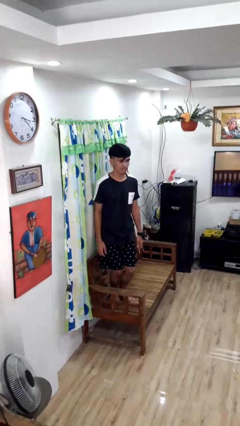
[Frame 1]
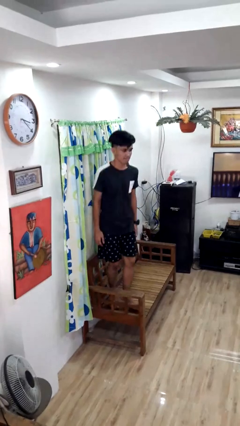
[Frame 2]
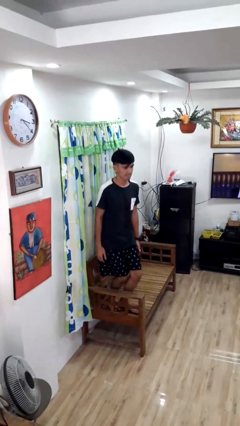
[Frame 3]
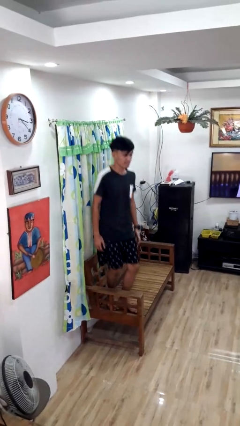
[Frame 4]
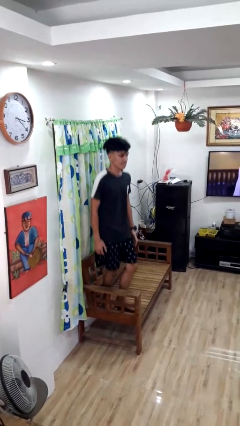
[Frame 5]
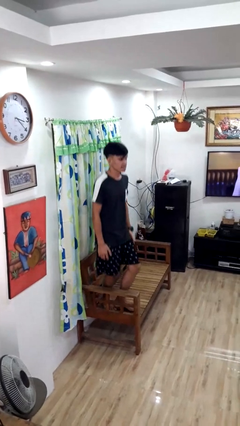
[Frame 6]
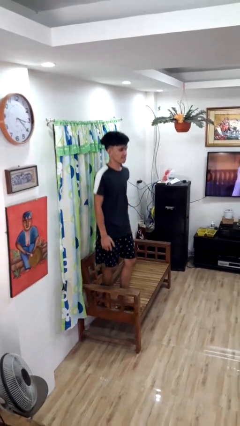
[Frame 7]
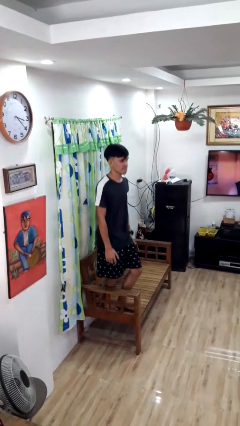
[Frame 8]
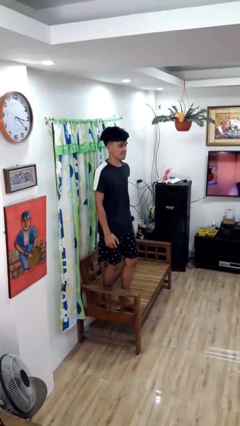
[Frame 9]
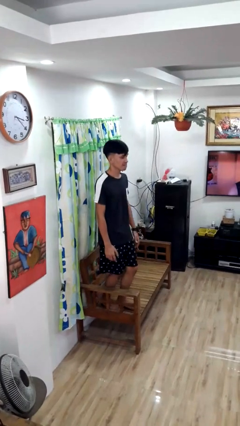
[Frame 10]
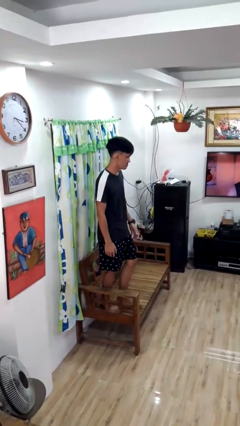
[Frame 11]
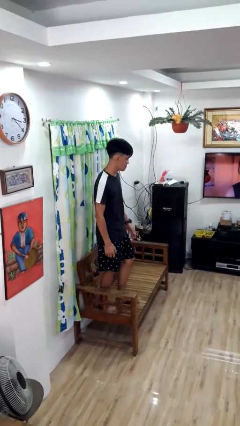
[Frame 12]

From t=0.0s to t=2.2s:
person jumps on couch

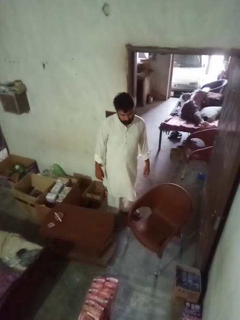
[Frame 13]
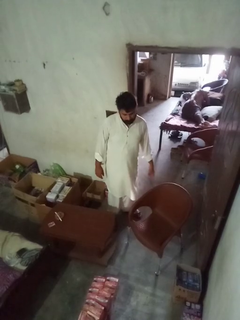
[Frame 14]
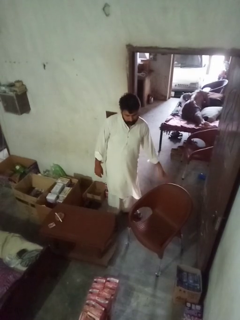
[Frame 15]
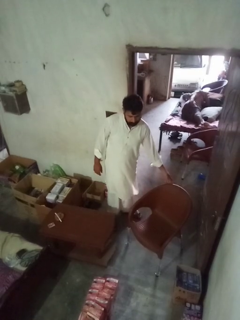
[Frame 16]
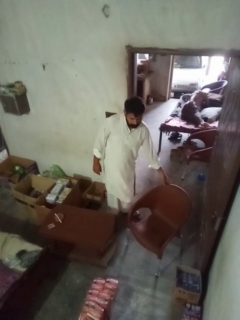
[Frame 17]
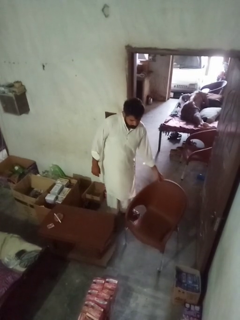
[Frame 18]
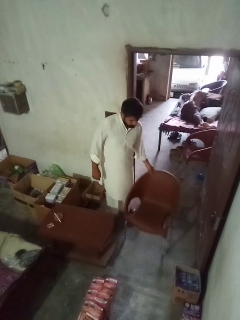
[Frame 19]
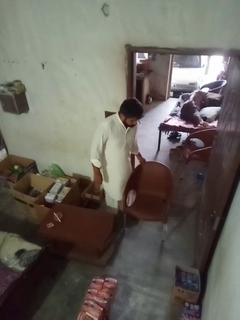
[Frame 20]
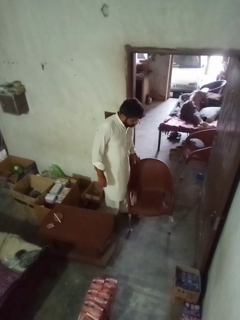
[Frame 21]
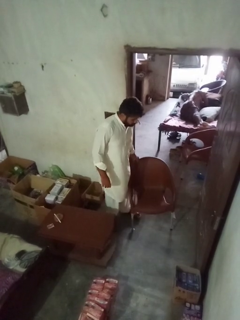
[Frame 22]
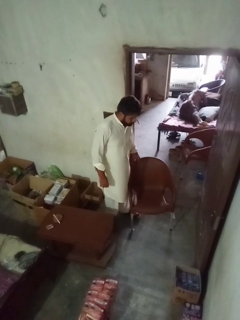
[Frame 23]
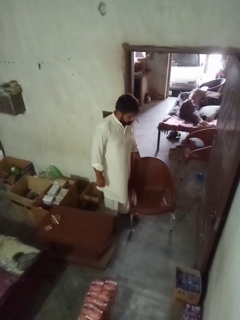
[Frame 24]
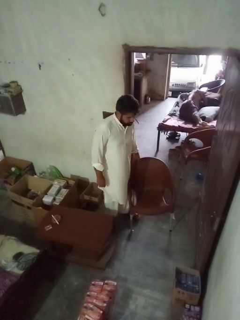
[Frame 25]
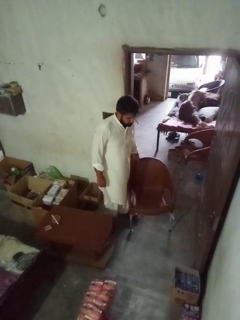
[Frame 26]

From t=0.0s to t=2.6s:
person pulls out chair

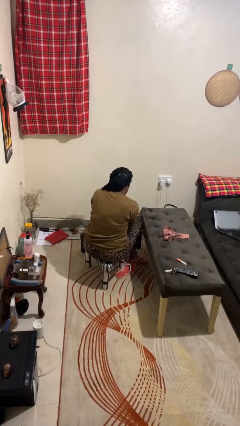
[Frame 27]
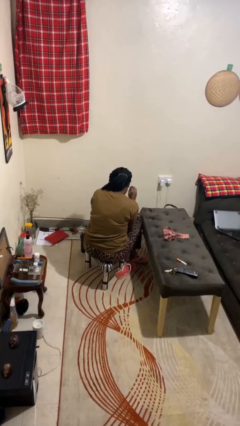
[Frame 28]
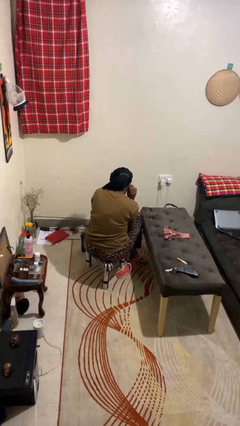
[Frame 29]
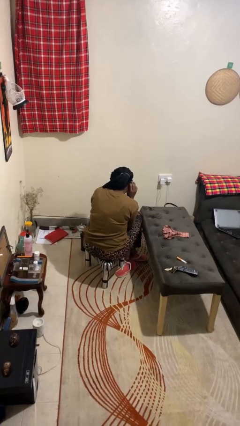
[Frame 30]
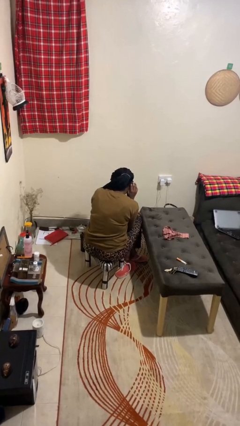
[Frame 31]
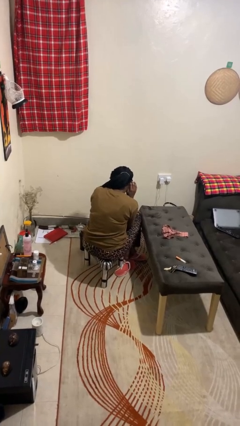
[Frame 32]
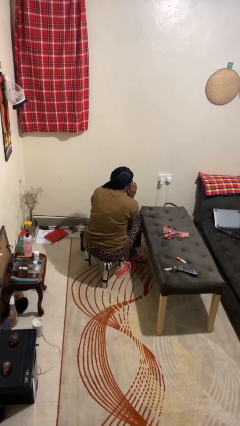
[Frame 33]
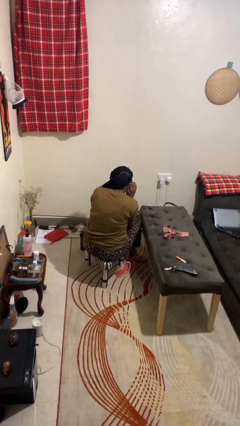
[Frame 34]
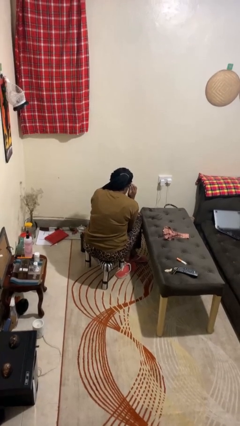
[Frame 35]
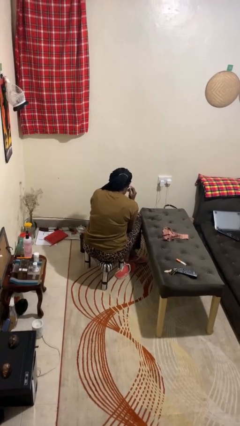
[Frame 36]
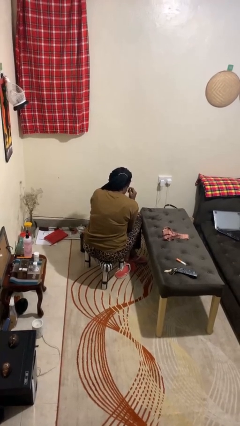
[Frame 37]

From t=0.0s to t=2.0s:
person gestures listen closely

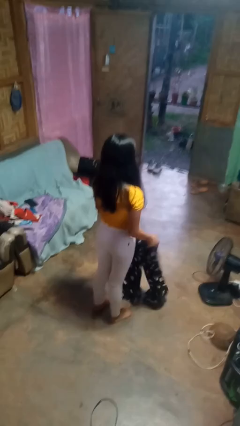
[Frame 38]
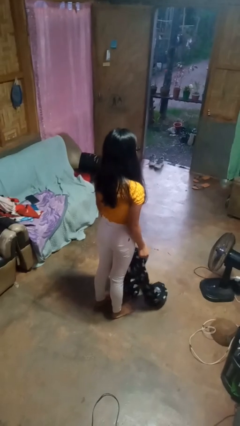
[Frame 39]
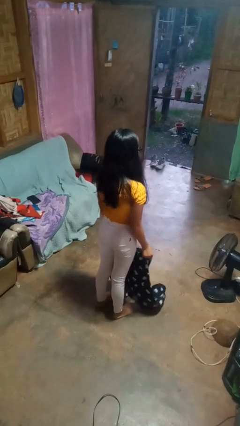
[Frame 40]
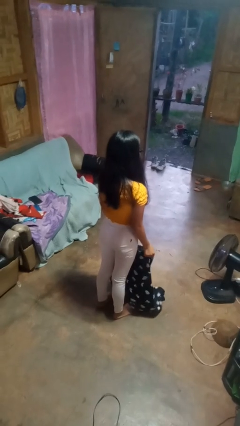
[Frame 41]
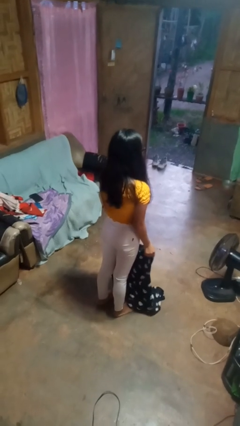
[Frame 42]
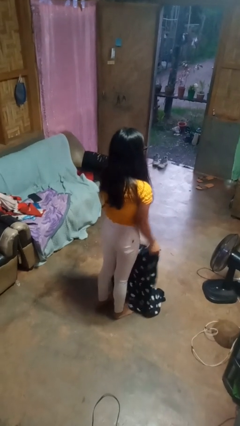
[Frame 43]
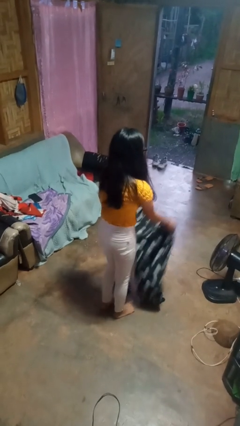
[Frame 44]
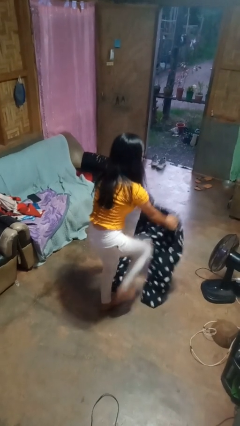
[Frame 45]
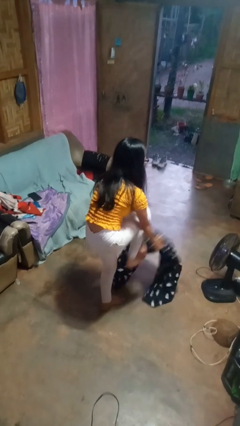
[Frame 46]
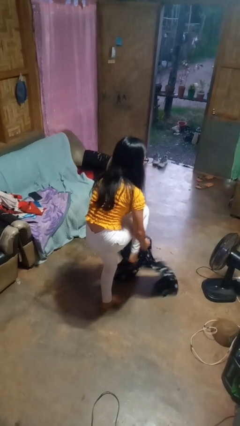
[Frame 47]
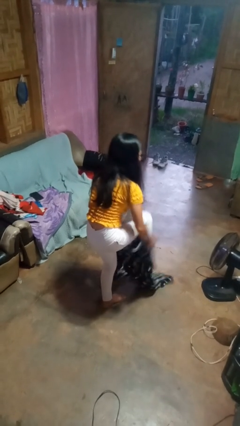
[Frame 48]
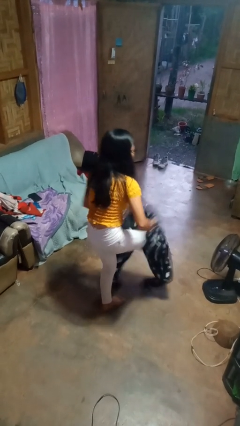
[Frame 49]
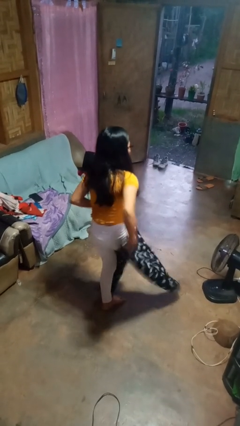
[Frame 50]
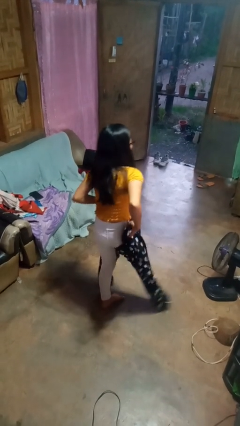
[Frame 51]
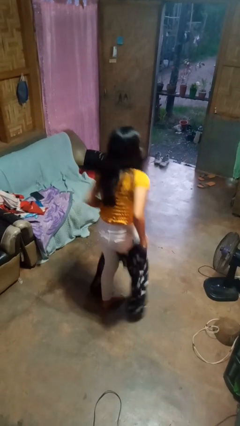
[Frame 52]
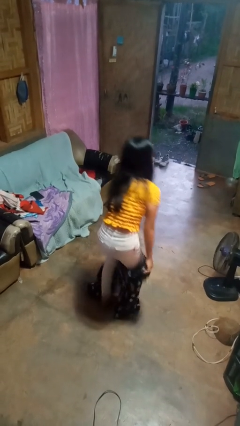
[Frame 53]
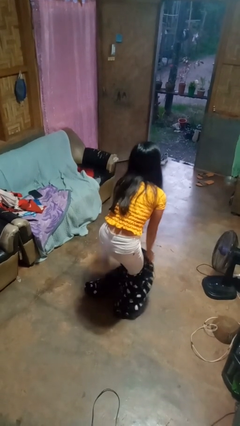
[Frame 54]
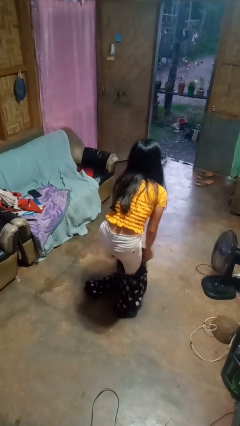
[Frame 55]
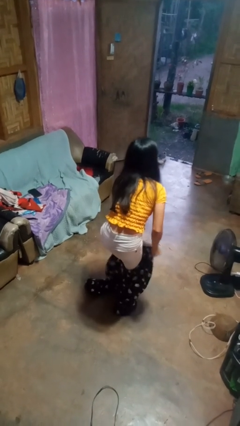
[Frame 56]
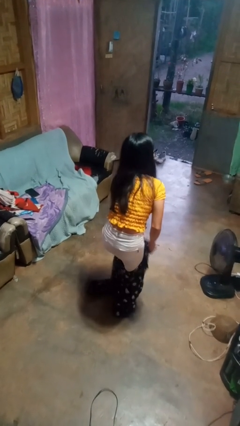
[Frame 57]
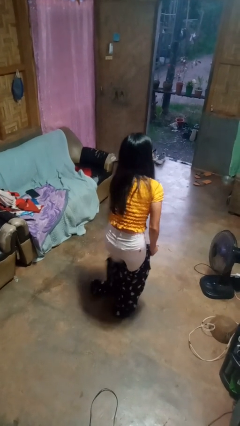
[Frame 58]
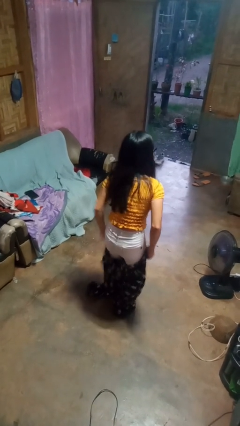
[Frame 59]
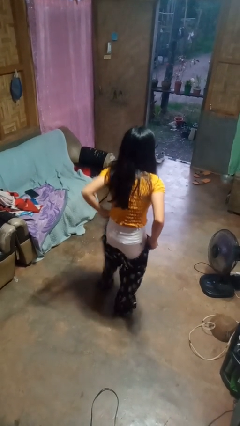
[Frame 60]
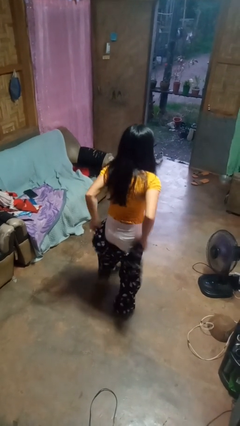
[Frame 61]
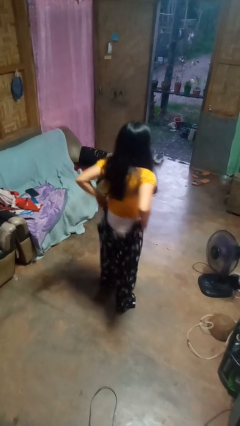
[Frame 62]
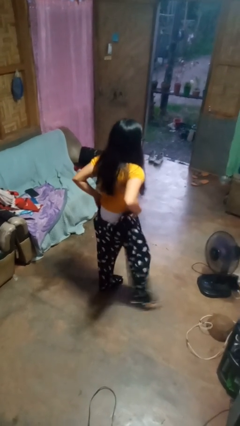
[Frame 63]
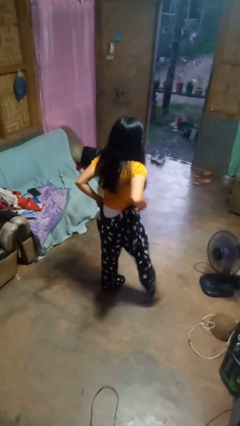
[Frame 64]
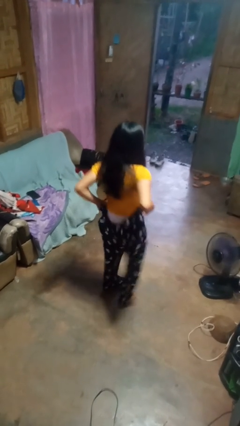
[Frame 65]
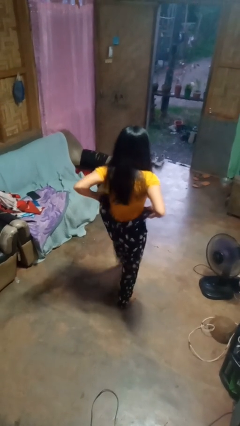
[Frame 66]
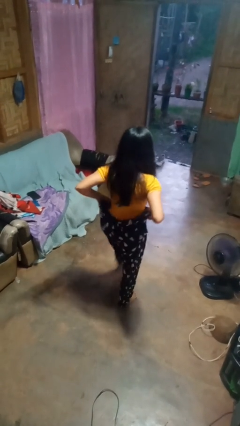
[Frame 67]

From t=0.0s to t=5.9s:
person puts on pants

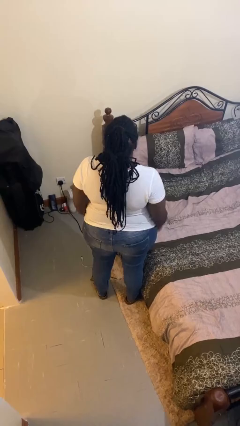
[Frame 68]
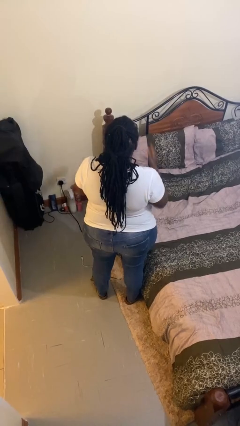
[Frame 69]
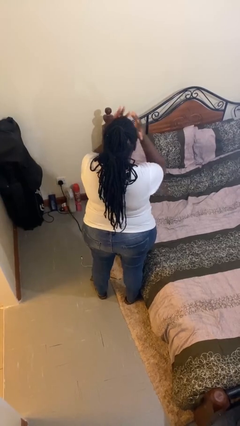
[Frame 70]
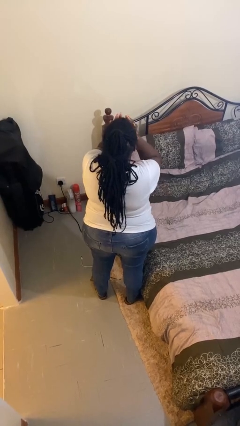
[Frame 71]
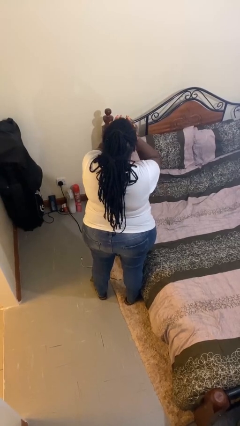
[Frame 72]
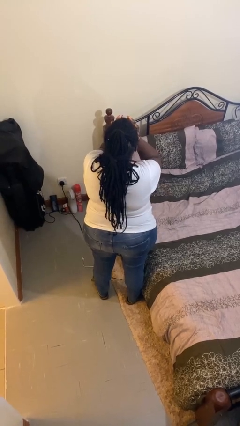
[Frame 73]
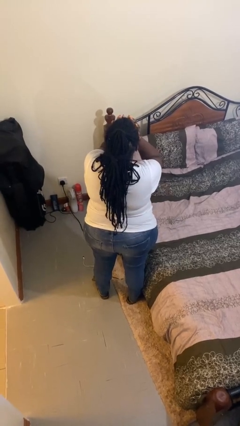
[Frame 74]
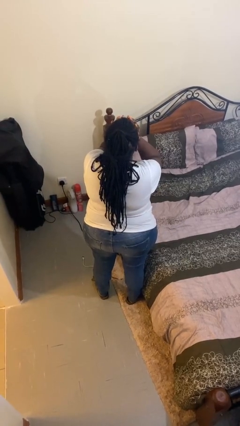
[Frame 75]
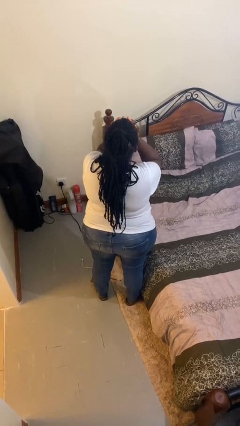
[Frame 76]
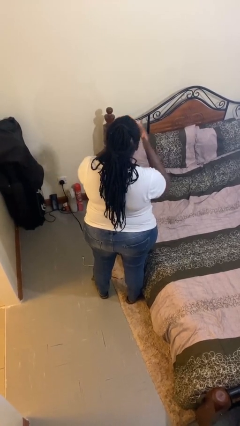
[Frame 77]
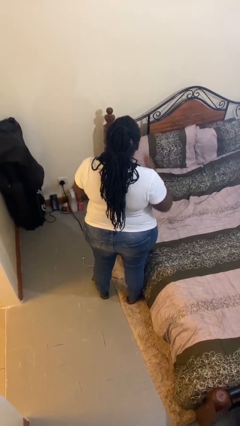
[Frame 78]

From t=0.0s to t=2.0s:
person covers face with hands

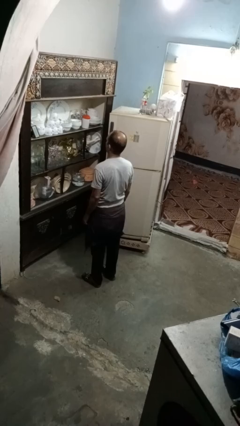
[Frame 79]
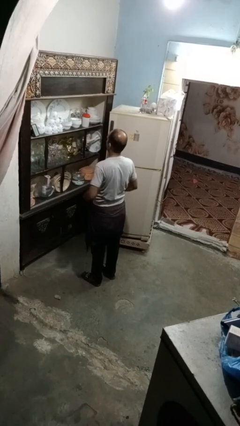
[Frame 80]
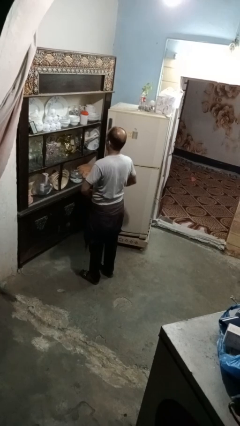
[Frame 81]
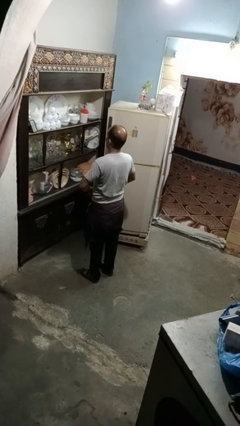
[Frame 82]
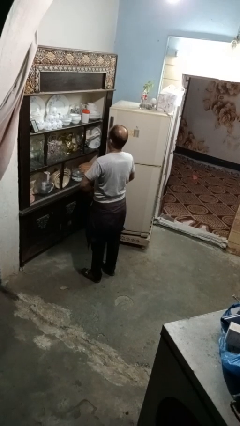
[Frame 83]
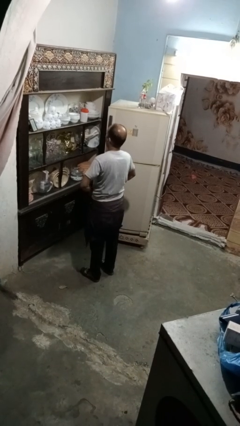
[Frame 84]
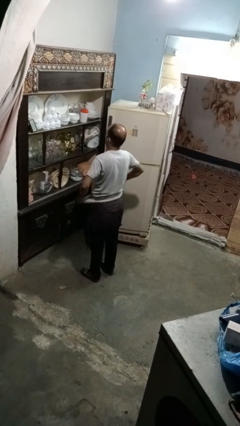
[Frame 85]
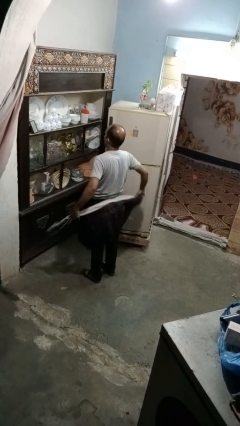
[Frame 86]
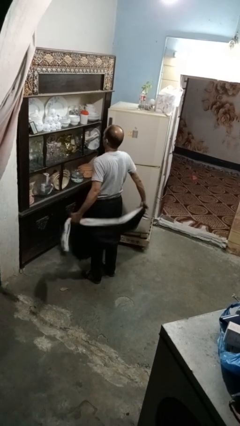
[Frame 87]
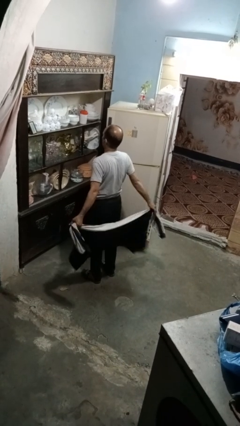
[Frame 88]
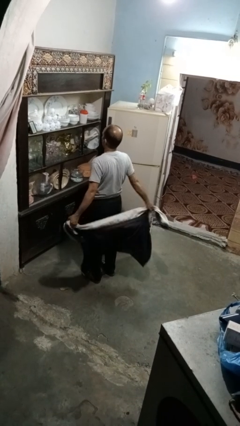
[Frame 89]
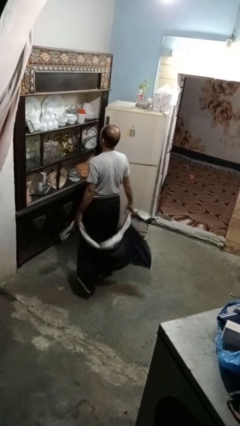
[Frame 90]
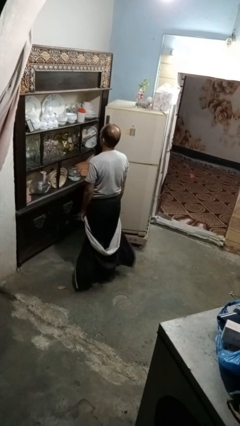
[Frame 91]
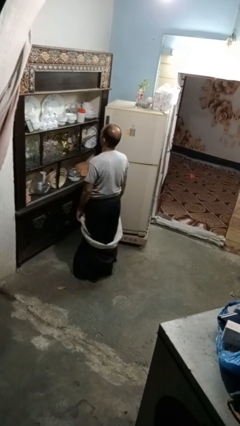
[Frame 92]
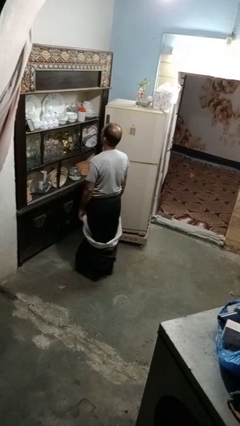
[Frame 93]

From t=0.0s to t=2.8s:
person unties jacket around waist

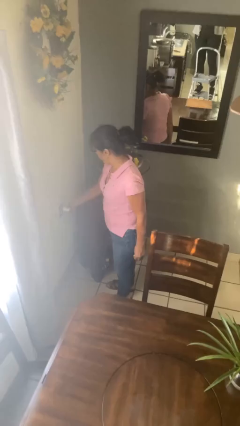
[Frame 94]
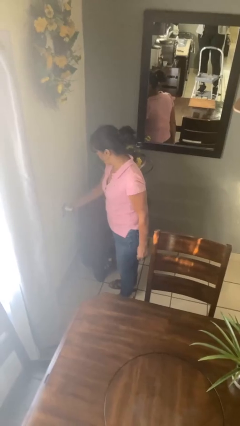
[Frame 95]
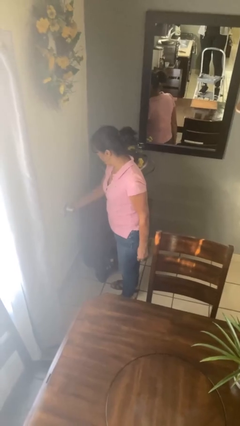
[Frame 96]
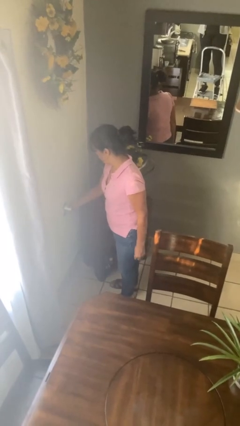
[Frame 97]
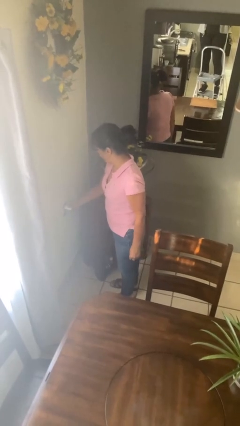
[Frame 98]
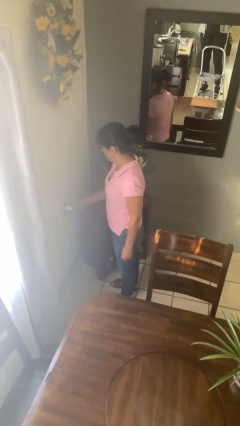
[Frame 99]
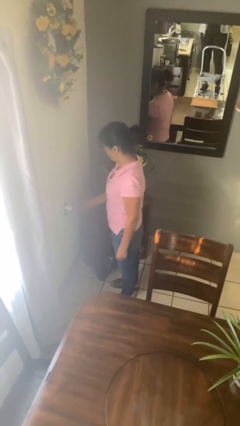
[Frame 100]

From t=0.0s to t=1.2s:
person plugs into electrical socket
